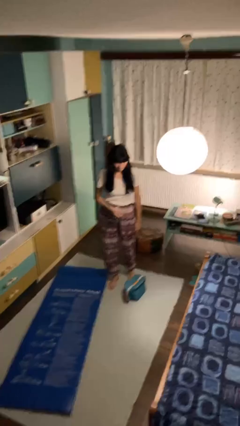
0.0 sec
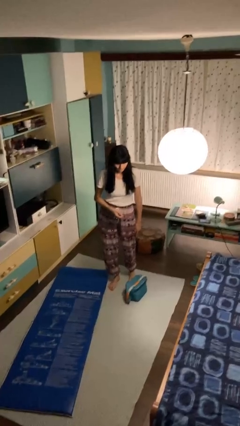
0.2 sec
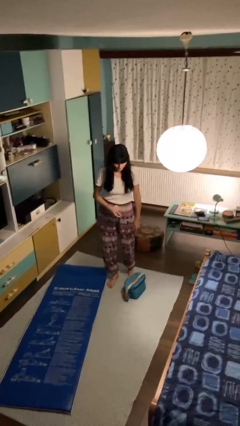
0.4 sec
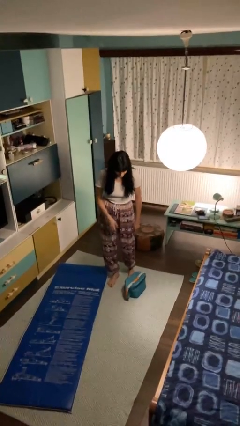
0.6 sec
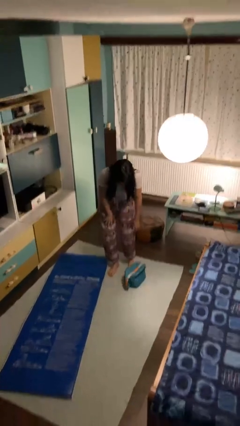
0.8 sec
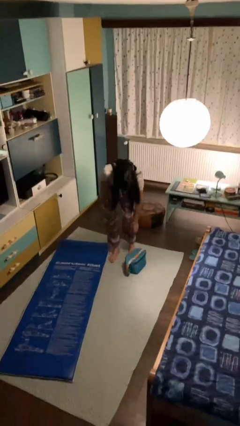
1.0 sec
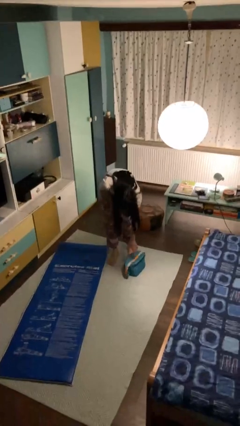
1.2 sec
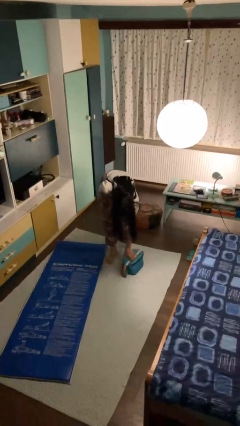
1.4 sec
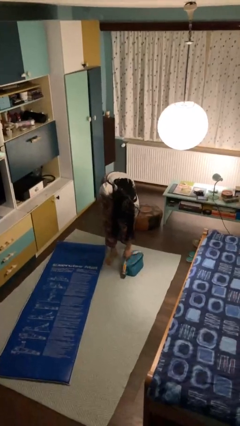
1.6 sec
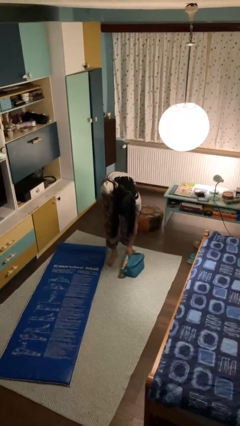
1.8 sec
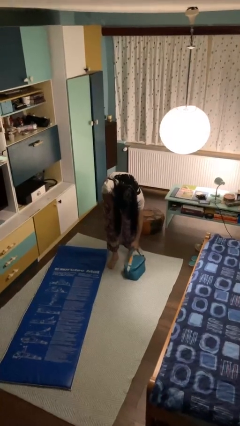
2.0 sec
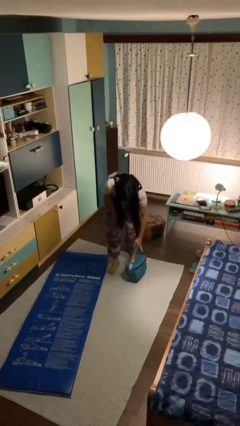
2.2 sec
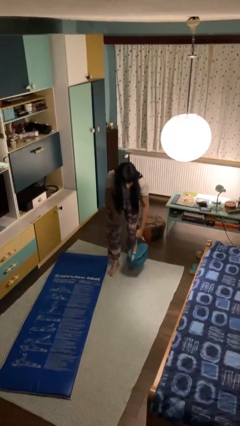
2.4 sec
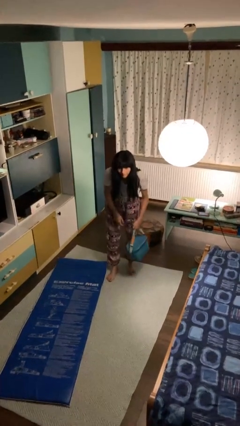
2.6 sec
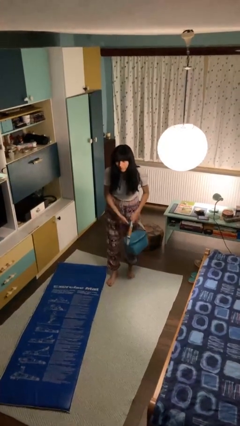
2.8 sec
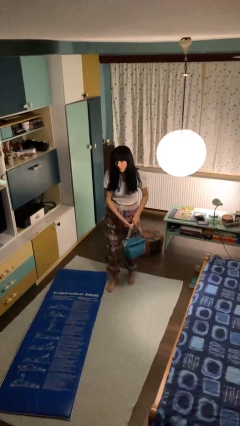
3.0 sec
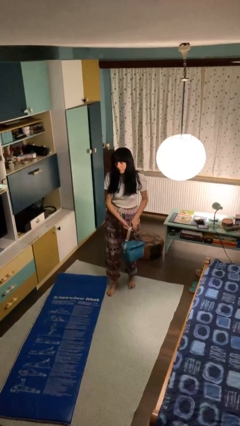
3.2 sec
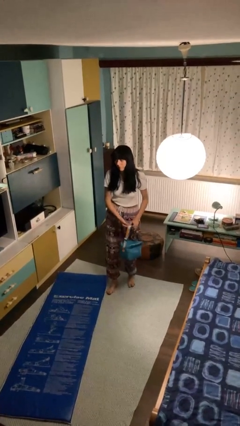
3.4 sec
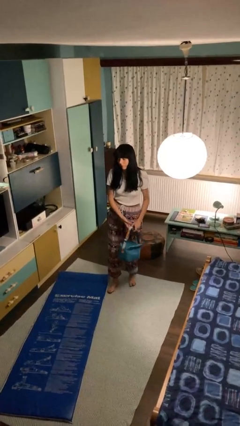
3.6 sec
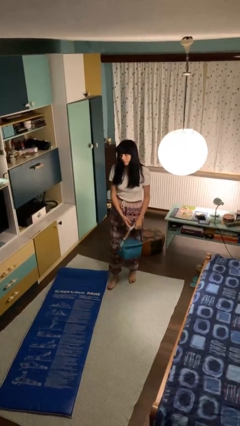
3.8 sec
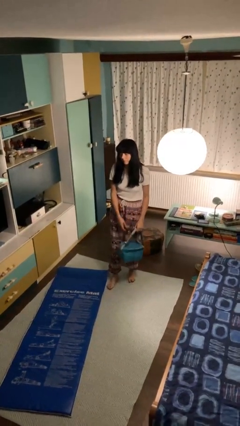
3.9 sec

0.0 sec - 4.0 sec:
person picks up object from floor

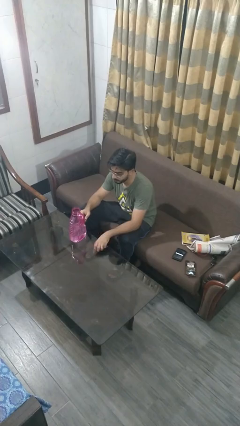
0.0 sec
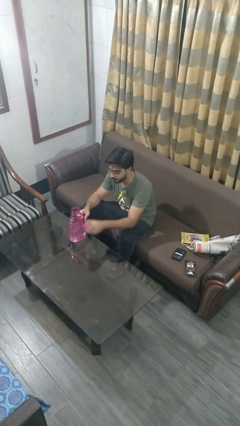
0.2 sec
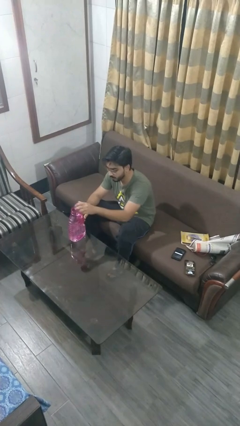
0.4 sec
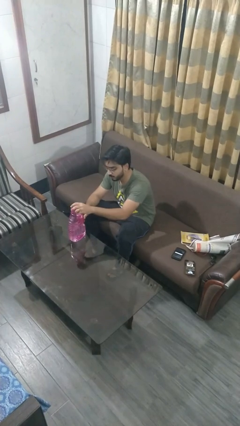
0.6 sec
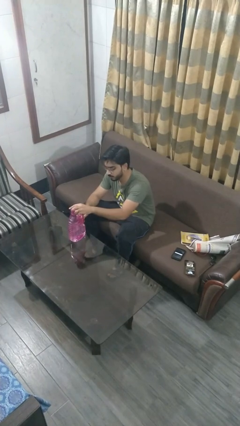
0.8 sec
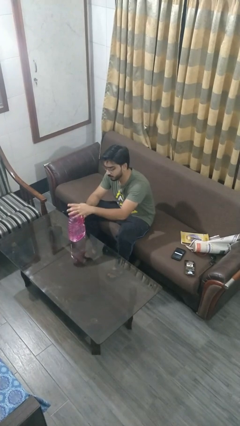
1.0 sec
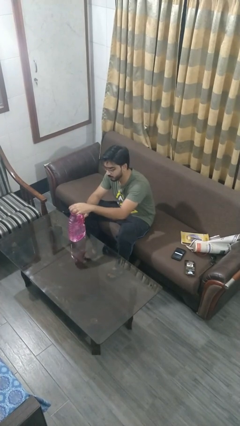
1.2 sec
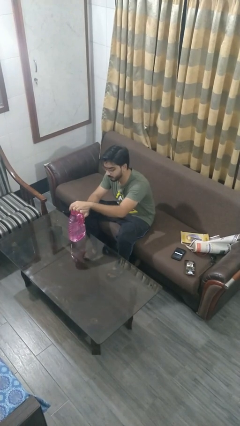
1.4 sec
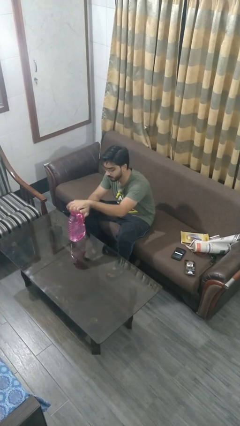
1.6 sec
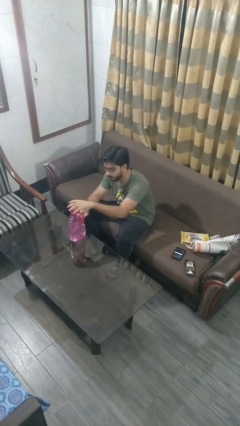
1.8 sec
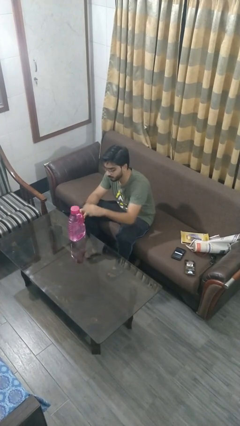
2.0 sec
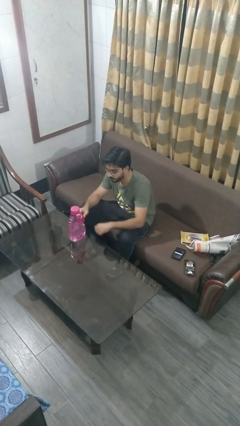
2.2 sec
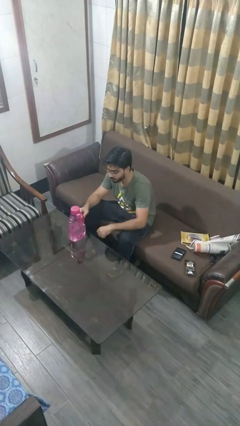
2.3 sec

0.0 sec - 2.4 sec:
person screws lid to bottle

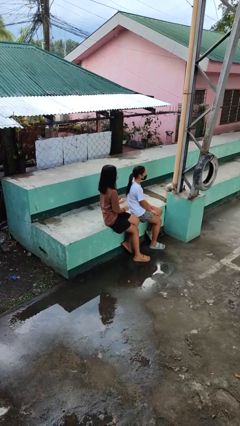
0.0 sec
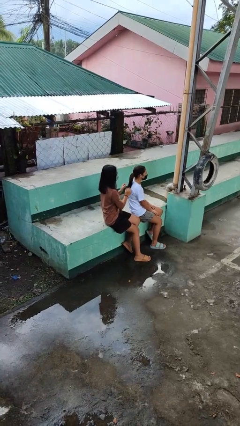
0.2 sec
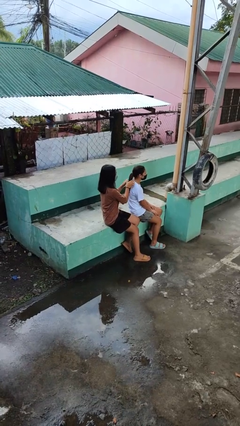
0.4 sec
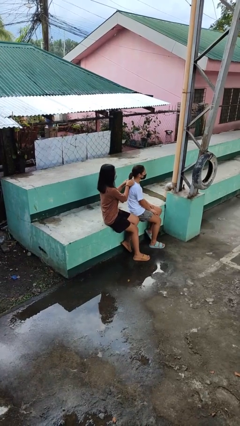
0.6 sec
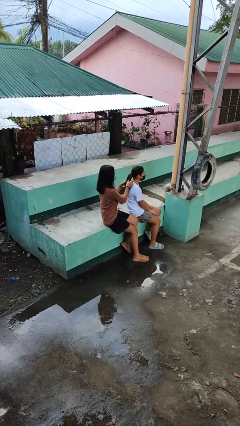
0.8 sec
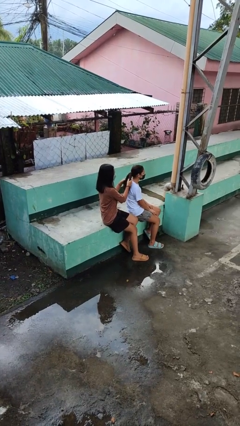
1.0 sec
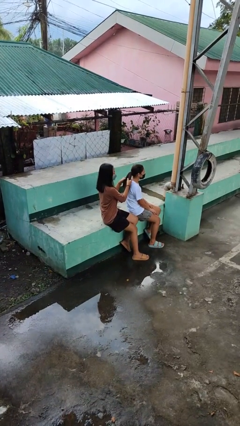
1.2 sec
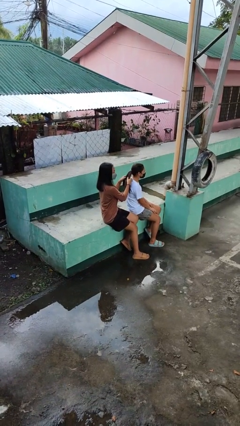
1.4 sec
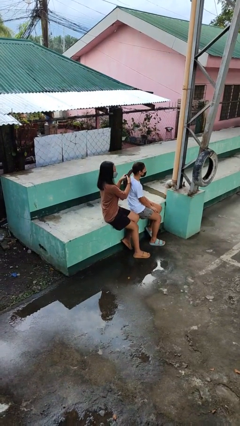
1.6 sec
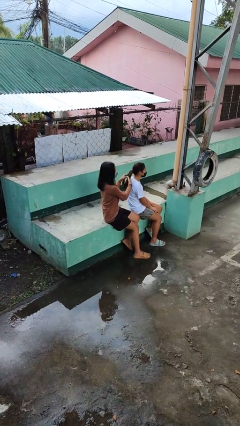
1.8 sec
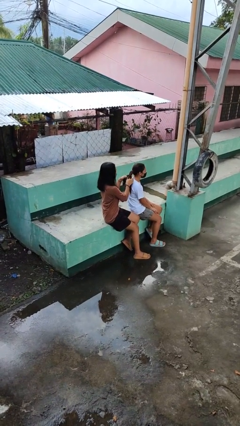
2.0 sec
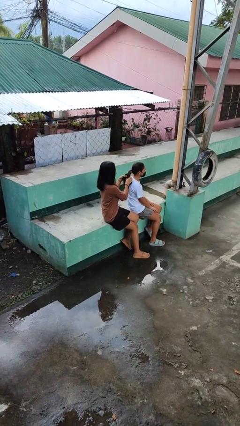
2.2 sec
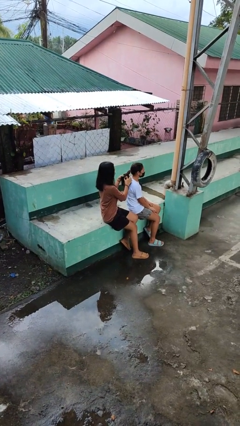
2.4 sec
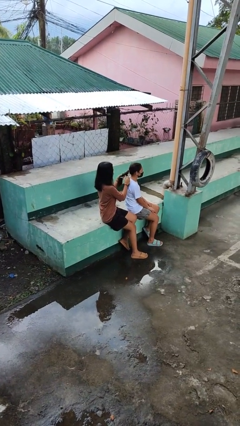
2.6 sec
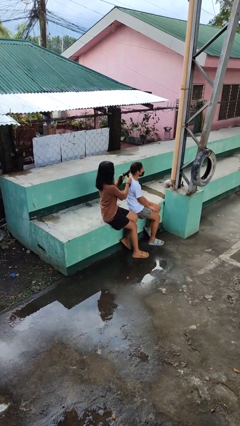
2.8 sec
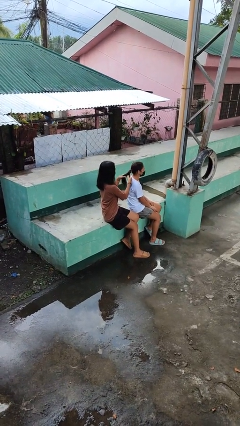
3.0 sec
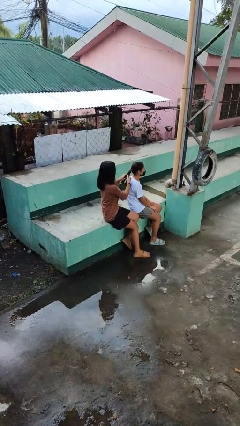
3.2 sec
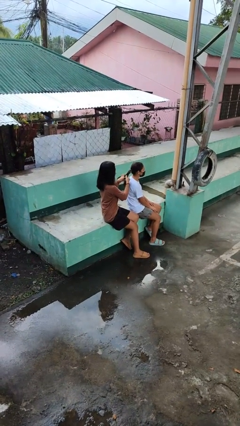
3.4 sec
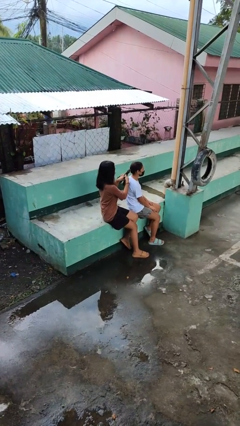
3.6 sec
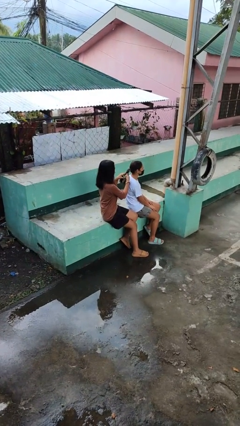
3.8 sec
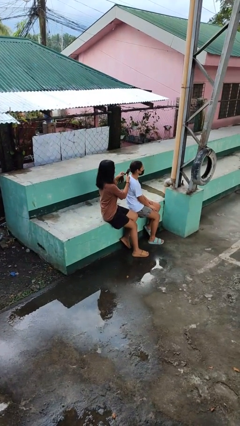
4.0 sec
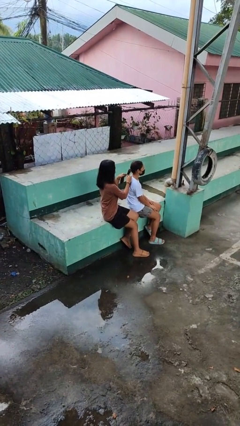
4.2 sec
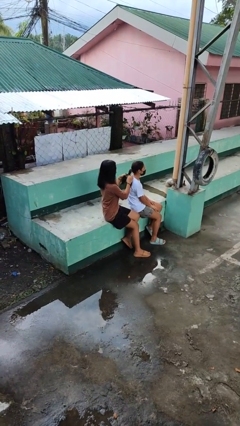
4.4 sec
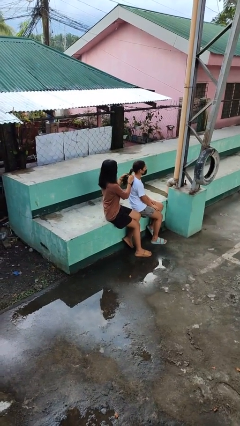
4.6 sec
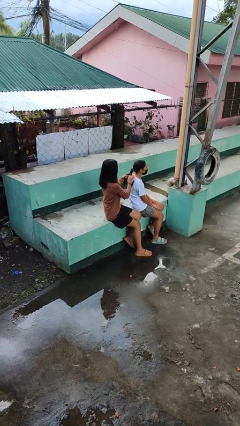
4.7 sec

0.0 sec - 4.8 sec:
person braids hair of person

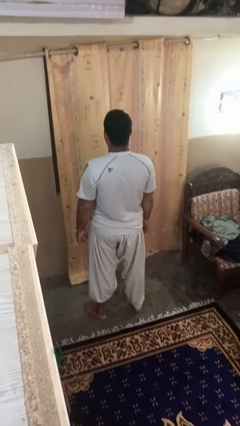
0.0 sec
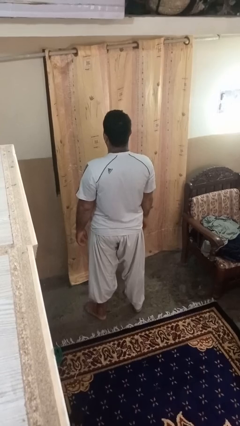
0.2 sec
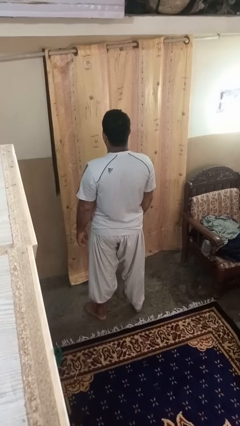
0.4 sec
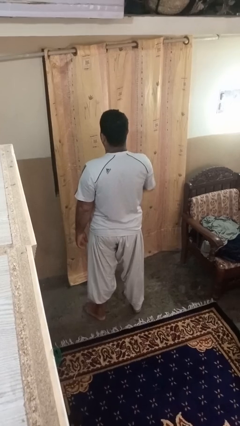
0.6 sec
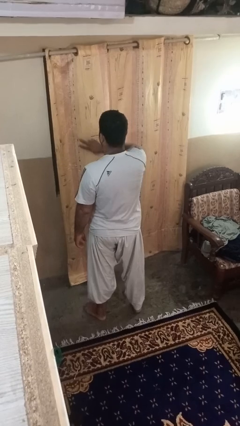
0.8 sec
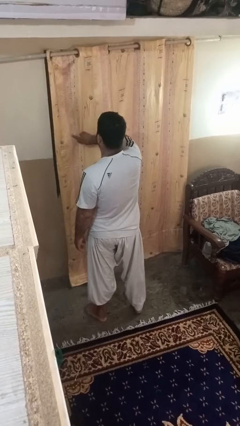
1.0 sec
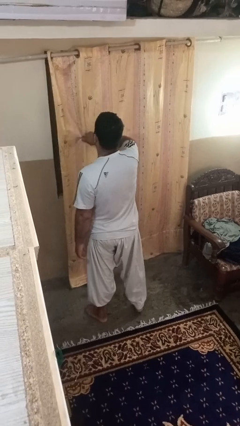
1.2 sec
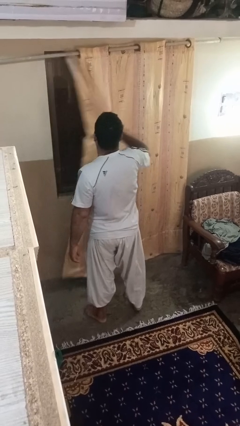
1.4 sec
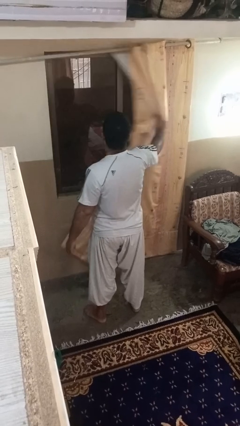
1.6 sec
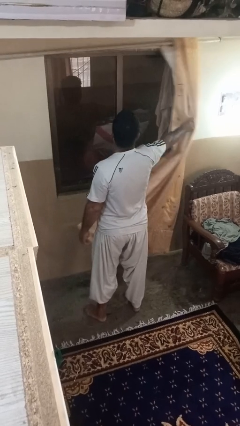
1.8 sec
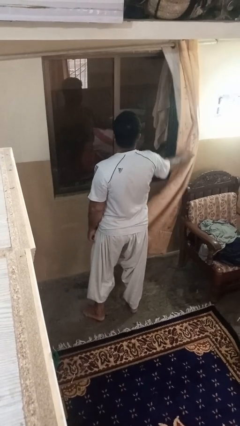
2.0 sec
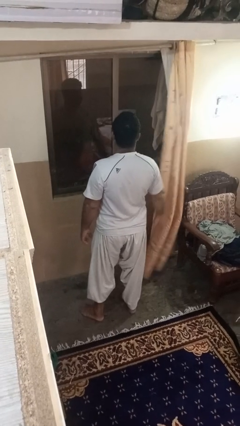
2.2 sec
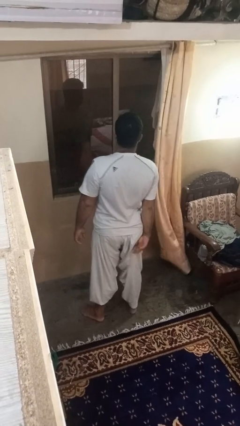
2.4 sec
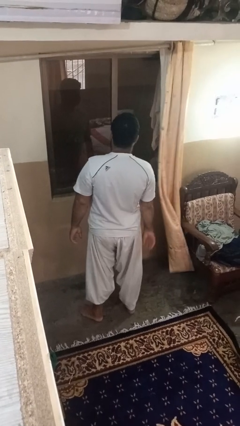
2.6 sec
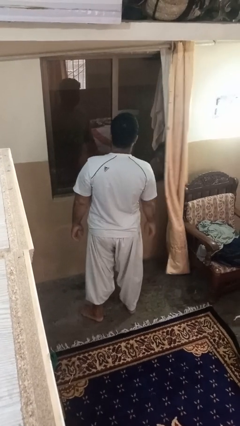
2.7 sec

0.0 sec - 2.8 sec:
person opens curtains

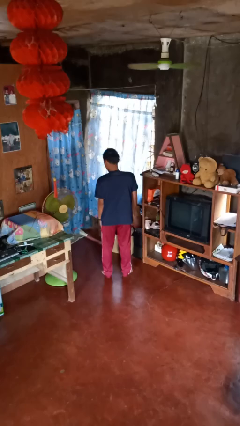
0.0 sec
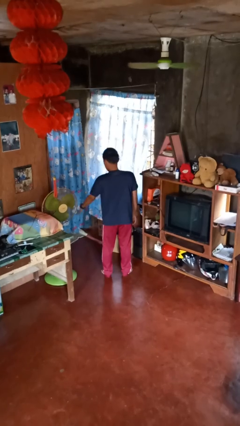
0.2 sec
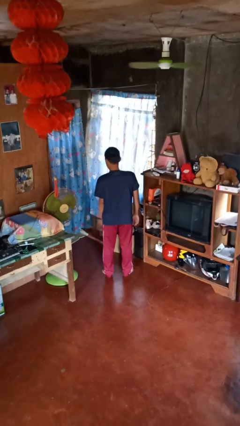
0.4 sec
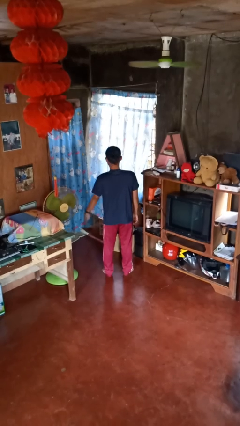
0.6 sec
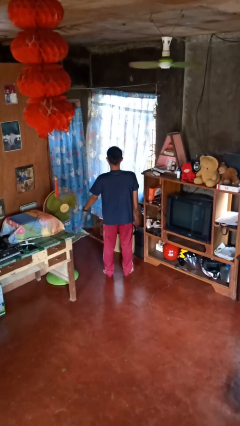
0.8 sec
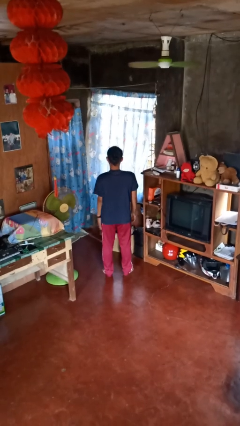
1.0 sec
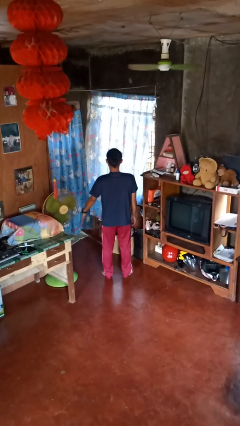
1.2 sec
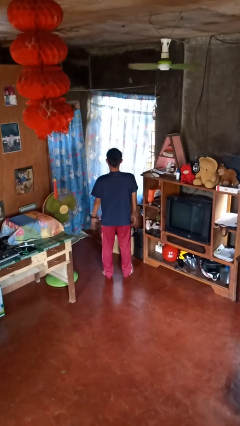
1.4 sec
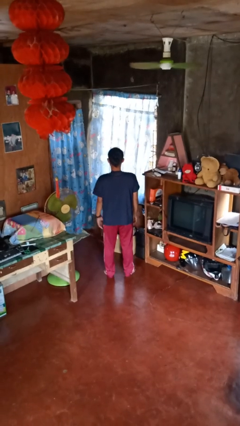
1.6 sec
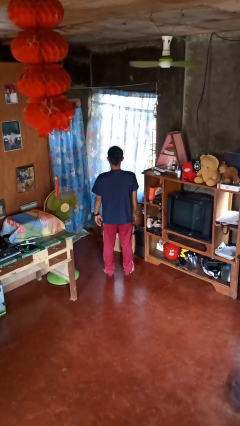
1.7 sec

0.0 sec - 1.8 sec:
person slaps hands on thighs

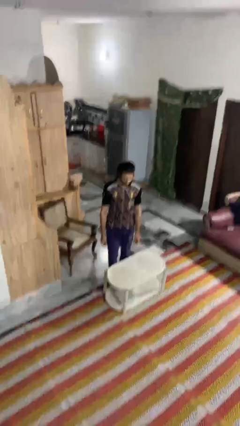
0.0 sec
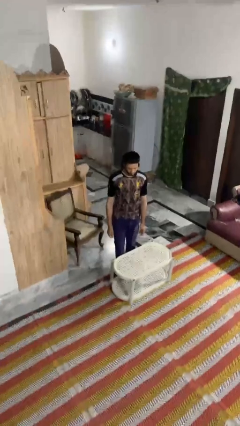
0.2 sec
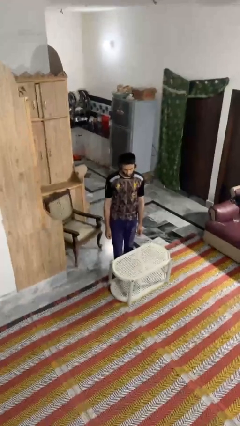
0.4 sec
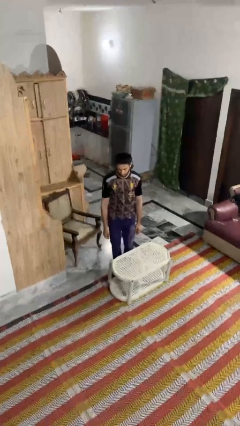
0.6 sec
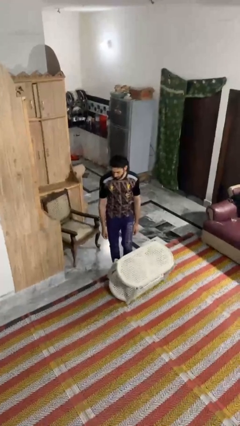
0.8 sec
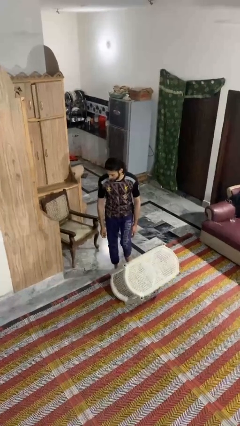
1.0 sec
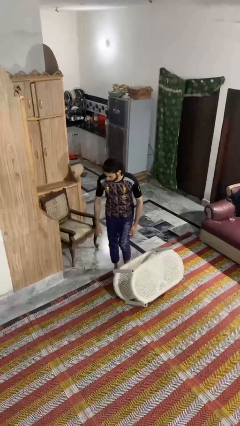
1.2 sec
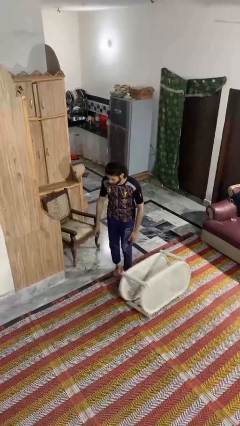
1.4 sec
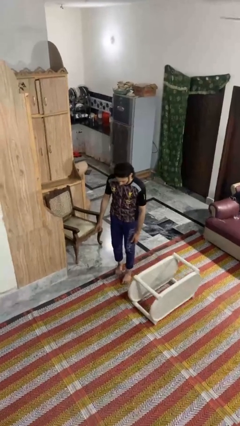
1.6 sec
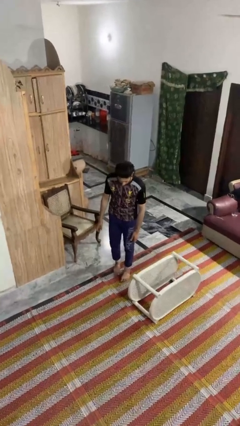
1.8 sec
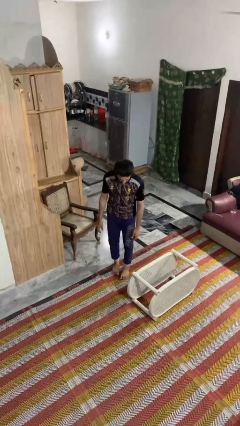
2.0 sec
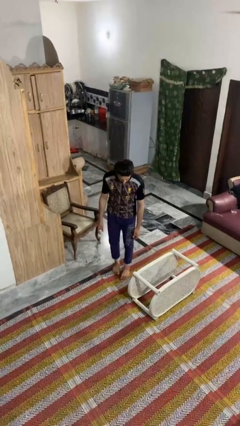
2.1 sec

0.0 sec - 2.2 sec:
person knocks over furniture
